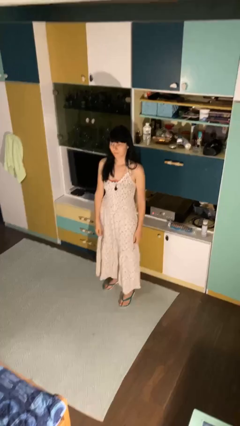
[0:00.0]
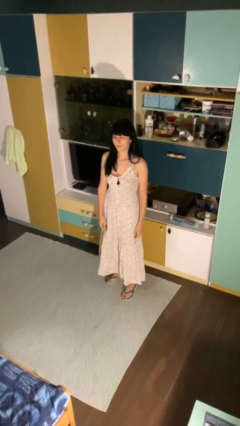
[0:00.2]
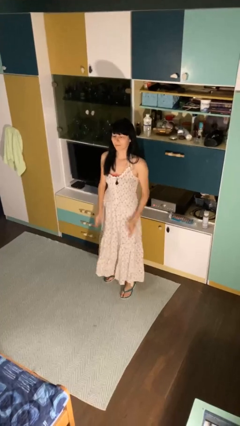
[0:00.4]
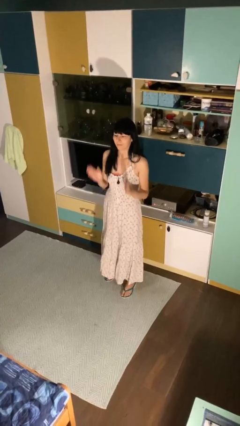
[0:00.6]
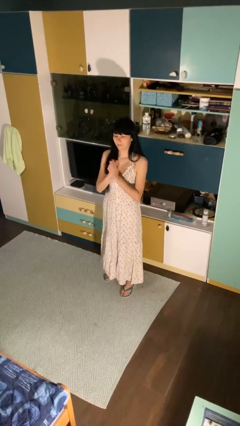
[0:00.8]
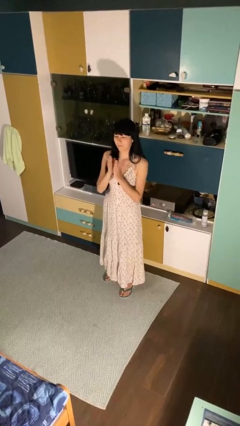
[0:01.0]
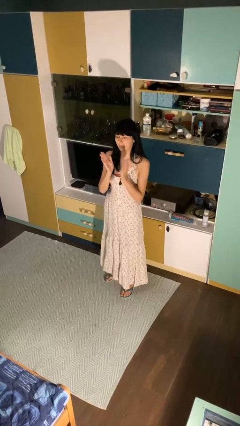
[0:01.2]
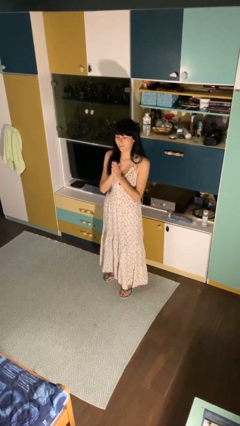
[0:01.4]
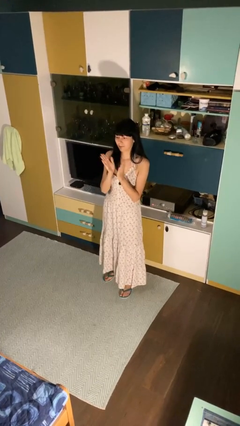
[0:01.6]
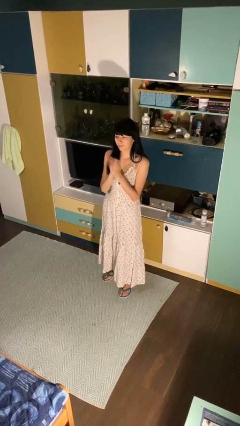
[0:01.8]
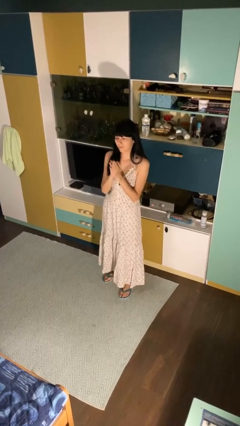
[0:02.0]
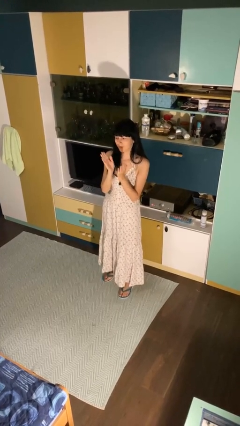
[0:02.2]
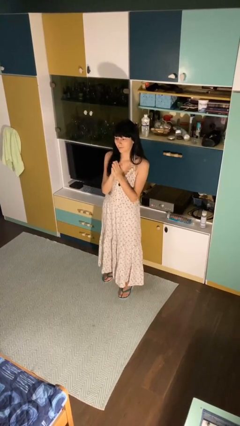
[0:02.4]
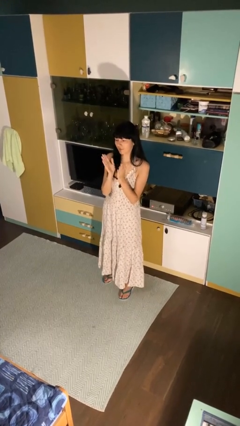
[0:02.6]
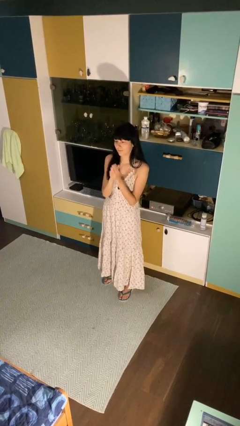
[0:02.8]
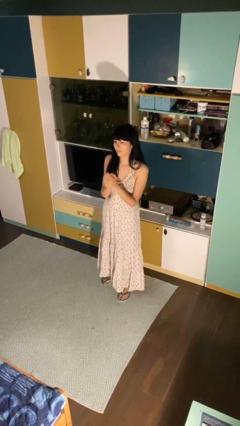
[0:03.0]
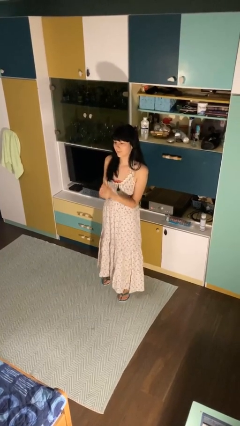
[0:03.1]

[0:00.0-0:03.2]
person claps hands

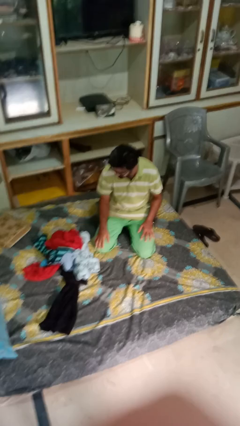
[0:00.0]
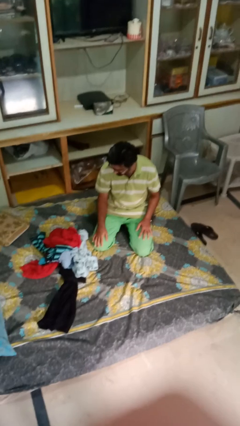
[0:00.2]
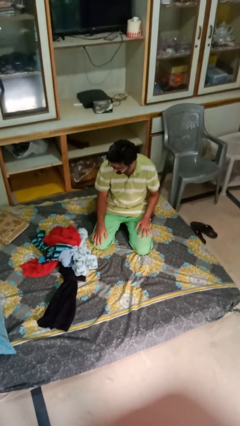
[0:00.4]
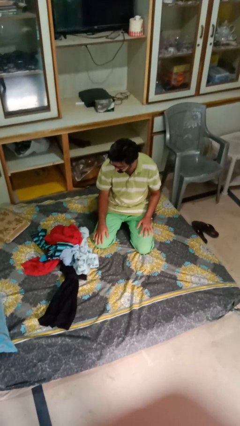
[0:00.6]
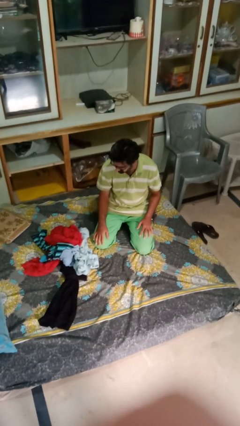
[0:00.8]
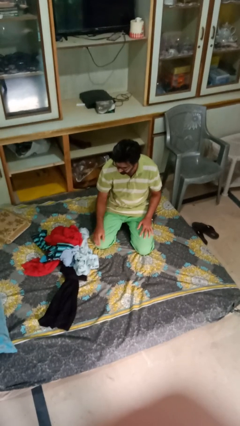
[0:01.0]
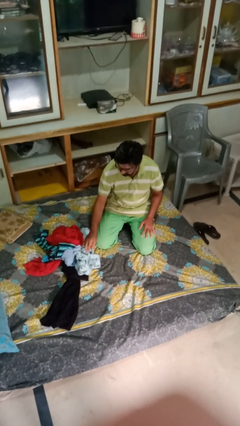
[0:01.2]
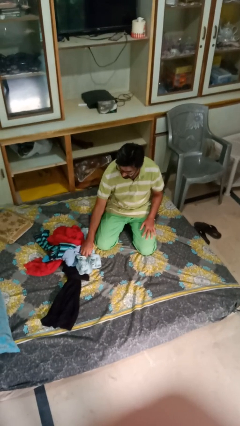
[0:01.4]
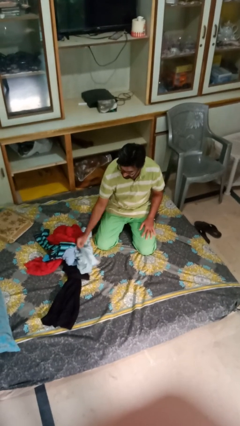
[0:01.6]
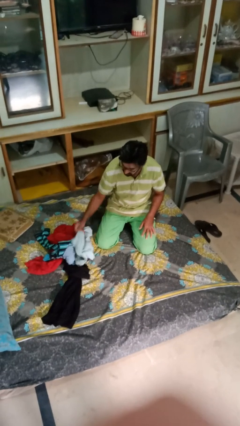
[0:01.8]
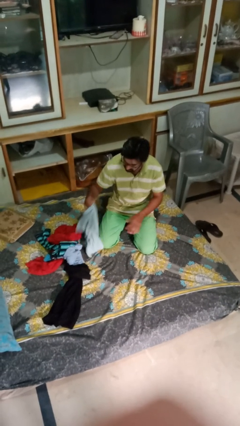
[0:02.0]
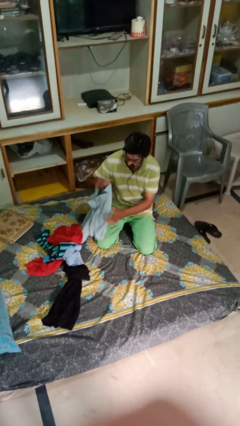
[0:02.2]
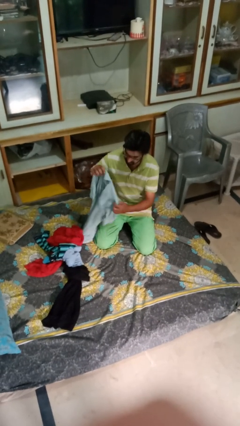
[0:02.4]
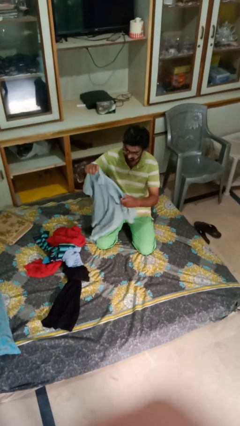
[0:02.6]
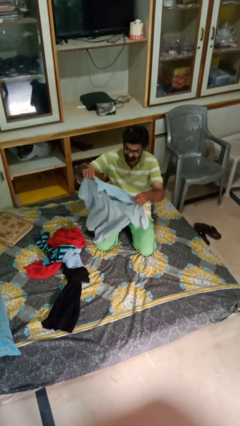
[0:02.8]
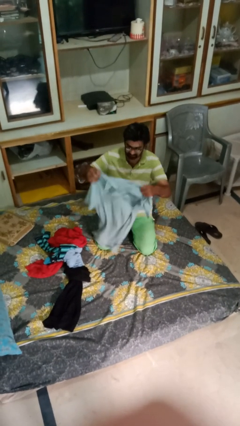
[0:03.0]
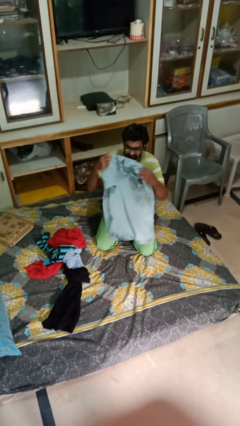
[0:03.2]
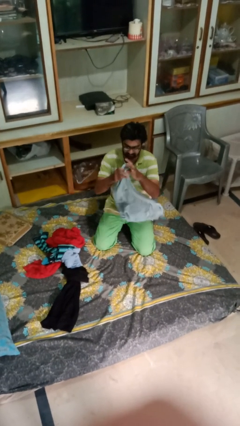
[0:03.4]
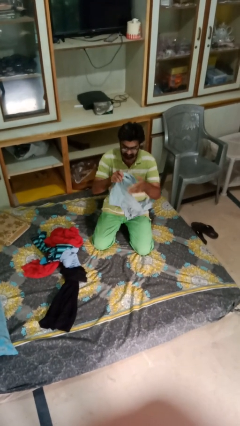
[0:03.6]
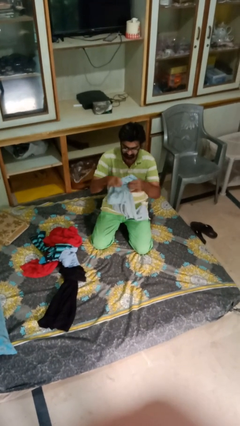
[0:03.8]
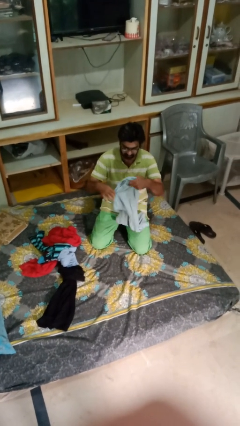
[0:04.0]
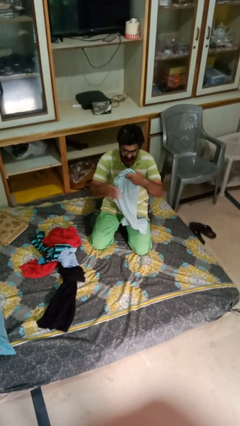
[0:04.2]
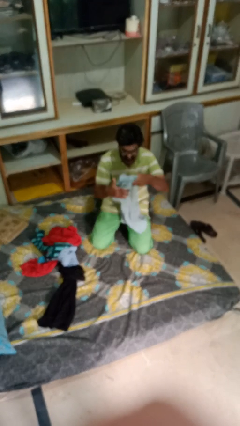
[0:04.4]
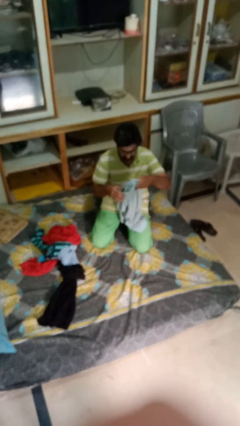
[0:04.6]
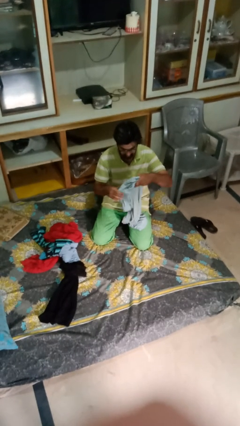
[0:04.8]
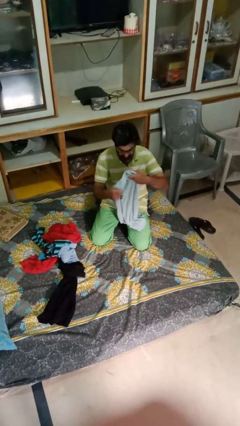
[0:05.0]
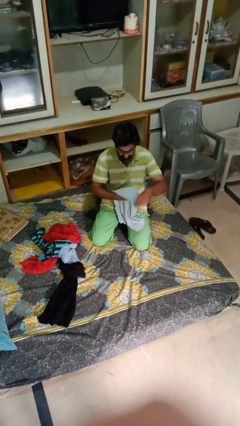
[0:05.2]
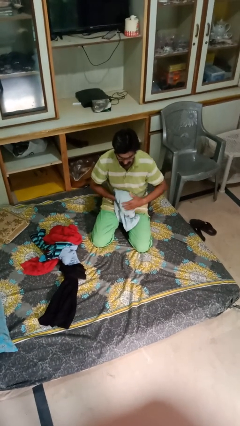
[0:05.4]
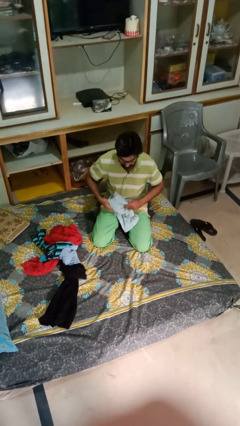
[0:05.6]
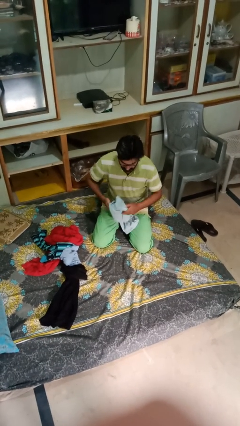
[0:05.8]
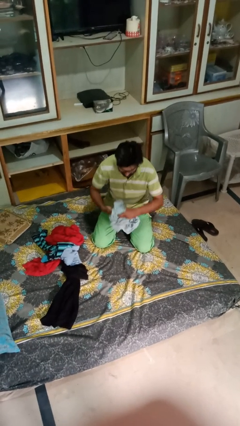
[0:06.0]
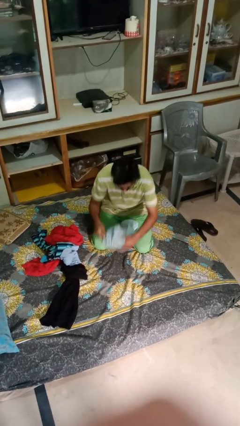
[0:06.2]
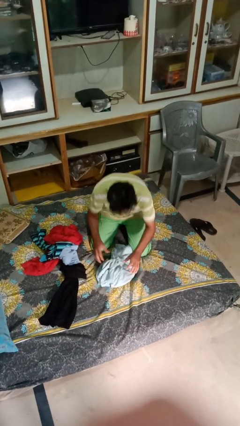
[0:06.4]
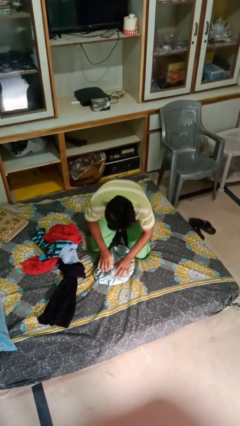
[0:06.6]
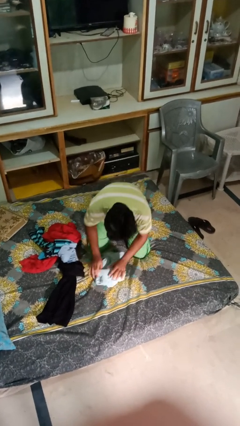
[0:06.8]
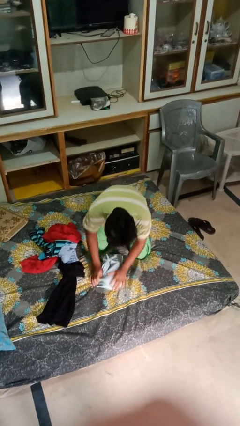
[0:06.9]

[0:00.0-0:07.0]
person folds shirt

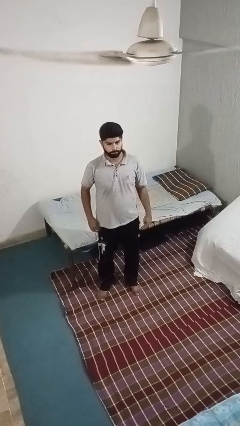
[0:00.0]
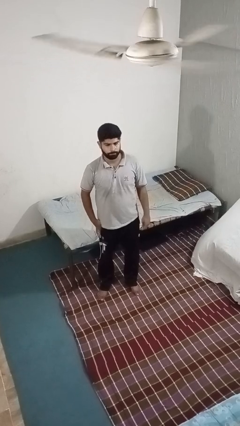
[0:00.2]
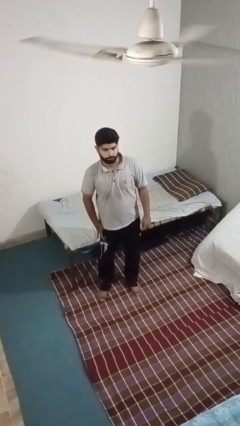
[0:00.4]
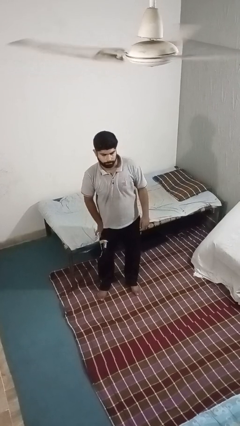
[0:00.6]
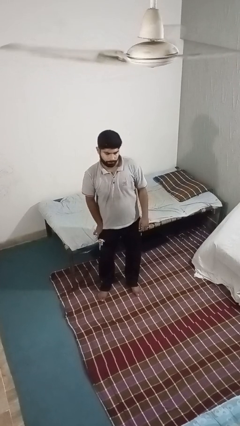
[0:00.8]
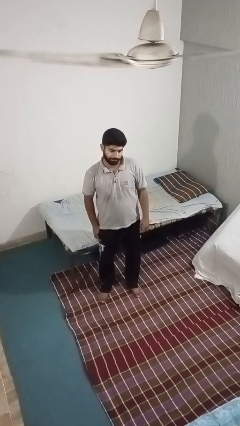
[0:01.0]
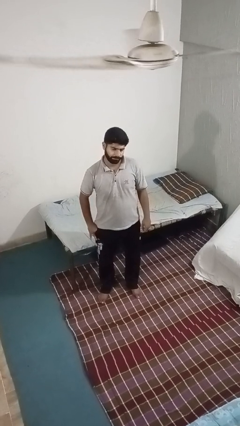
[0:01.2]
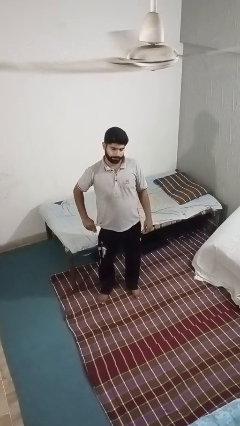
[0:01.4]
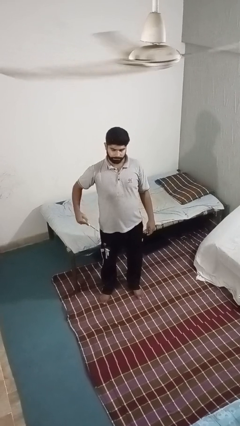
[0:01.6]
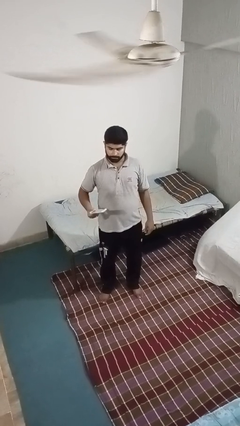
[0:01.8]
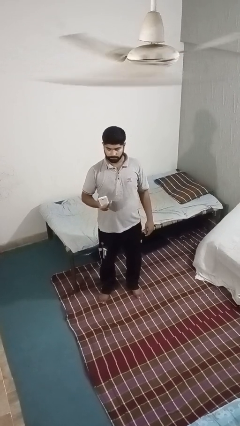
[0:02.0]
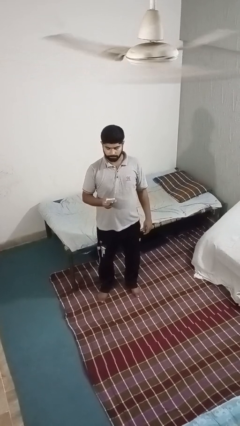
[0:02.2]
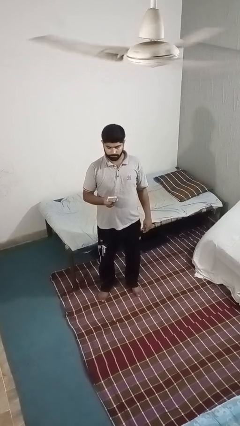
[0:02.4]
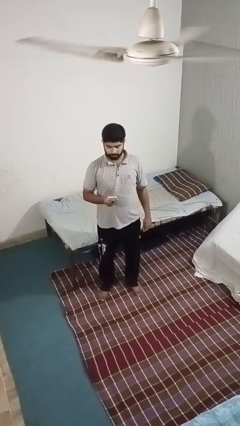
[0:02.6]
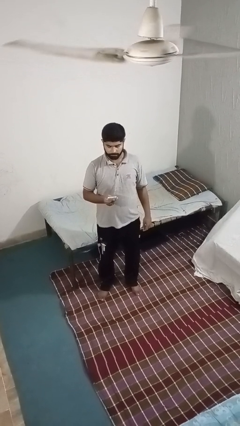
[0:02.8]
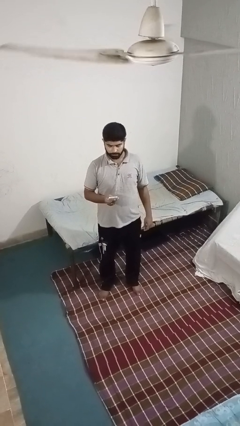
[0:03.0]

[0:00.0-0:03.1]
person takes phone from pocket

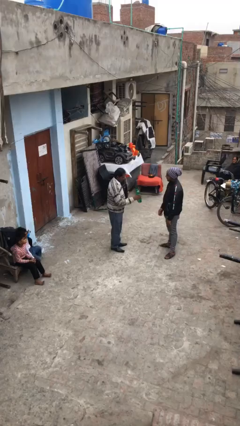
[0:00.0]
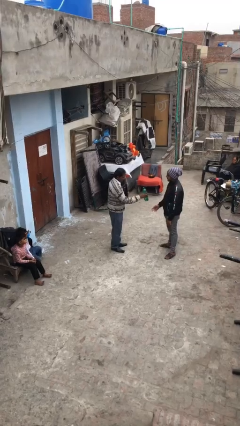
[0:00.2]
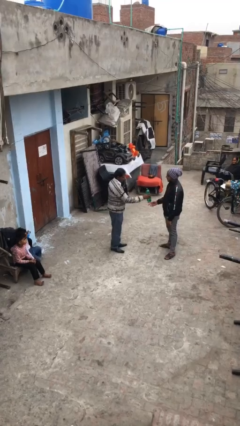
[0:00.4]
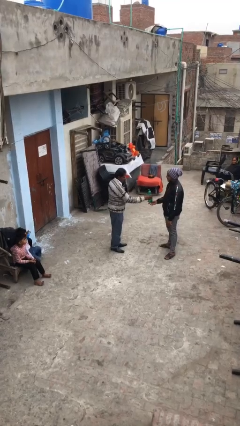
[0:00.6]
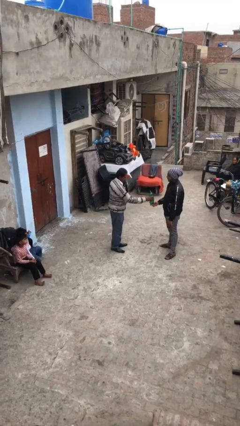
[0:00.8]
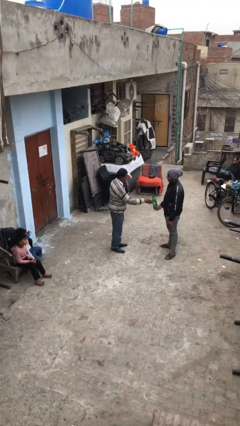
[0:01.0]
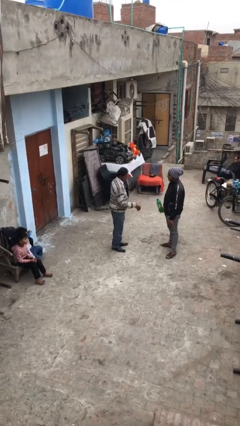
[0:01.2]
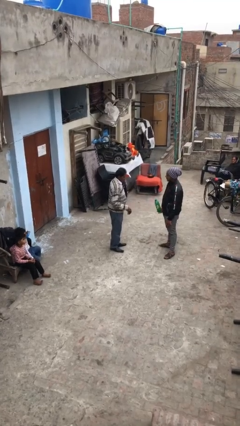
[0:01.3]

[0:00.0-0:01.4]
person transfers object to person

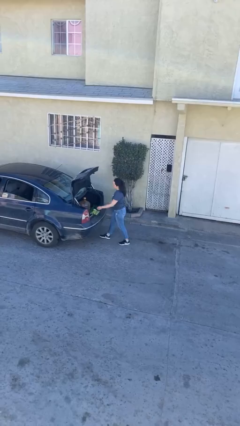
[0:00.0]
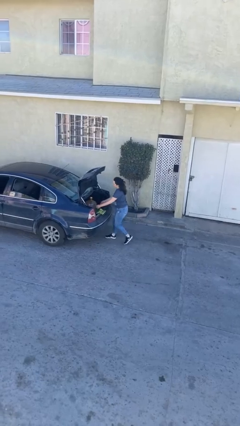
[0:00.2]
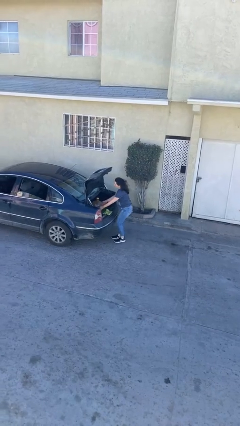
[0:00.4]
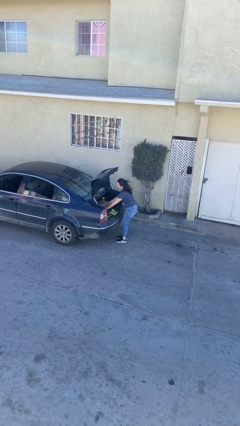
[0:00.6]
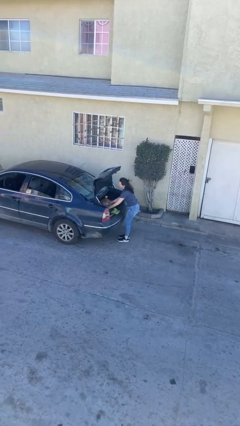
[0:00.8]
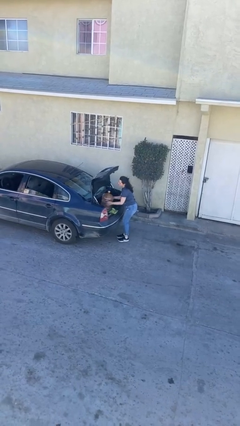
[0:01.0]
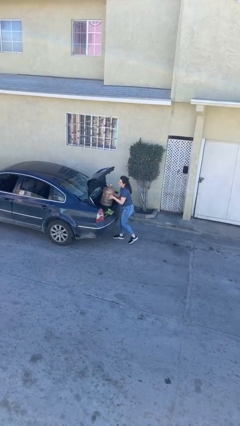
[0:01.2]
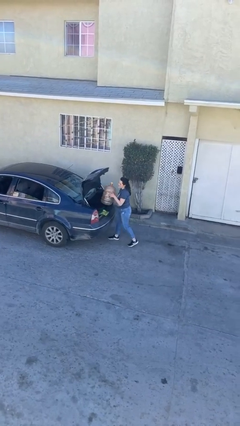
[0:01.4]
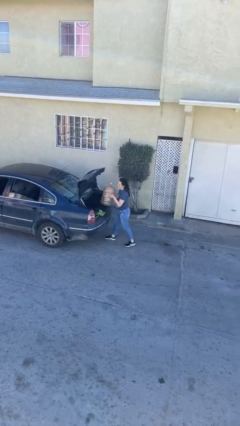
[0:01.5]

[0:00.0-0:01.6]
person unloads car

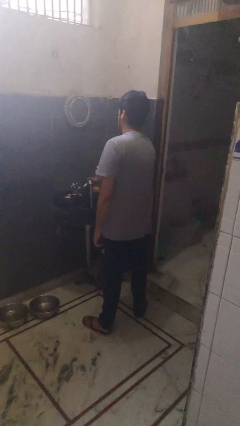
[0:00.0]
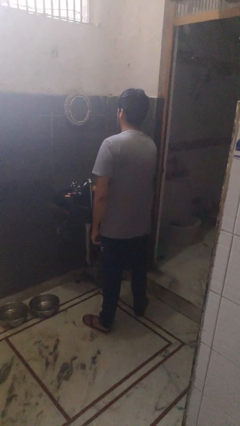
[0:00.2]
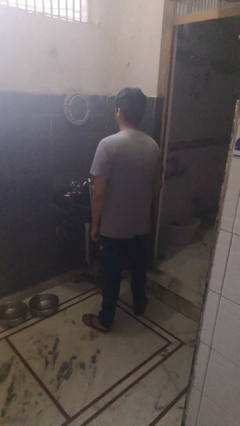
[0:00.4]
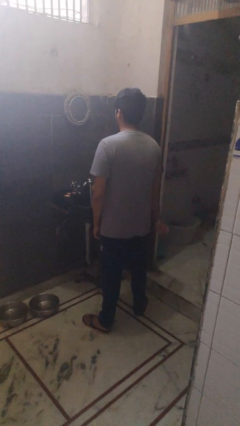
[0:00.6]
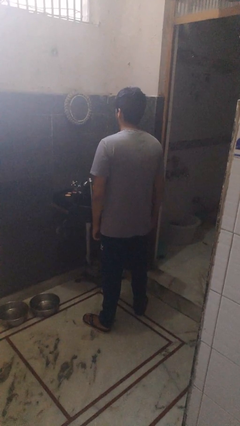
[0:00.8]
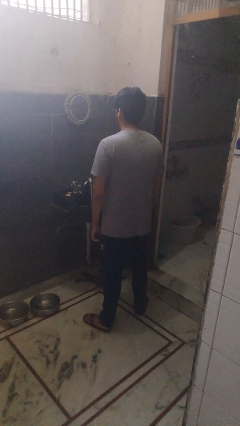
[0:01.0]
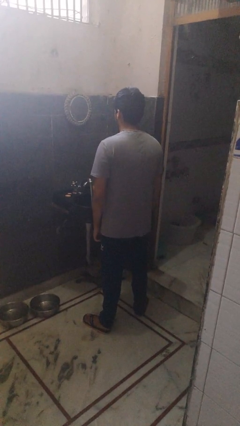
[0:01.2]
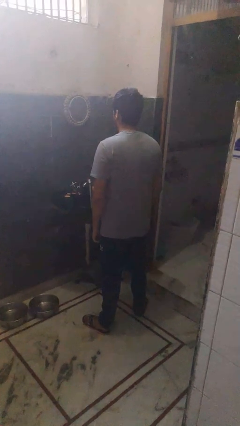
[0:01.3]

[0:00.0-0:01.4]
person turns on faucet
